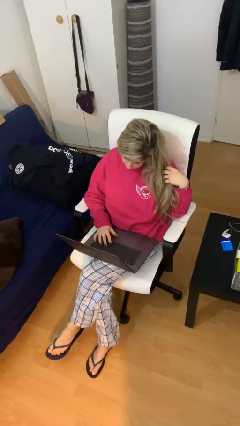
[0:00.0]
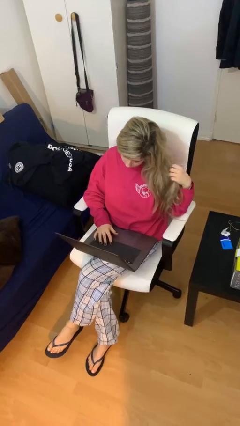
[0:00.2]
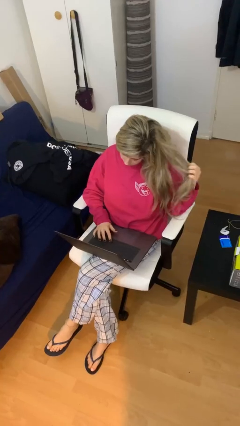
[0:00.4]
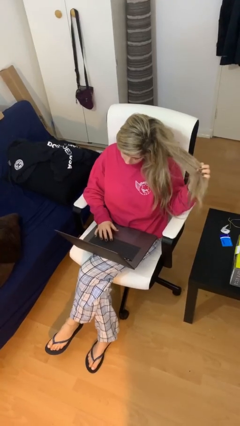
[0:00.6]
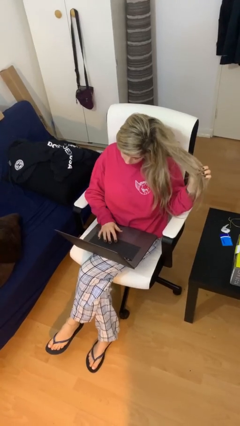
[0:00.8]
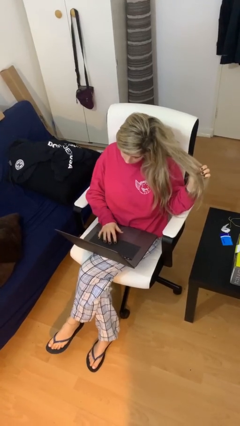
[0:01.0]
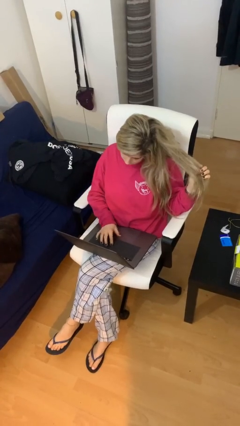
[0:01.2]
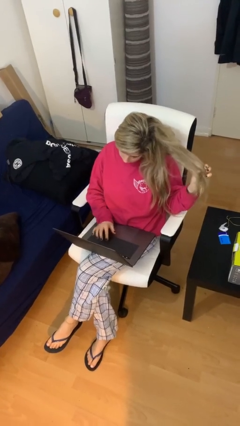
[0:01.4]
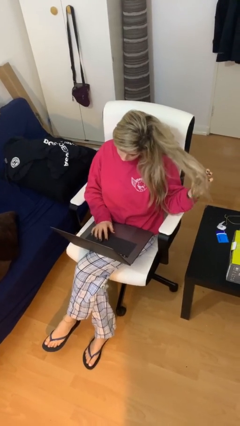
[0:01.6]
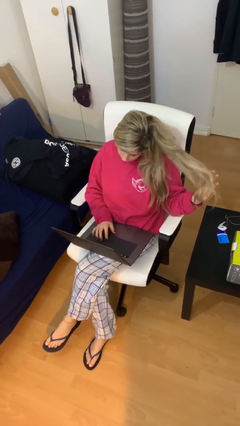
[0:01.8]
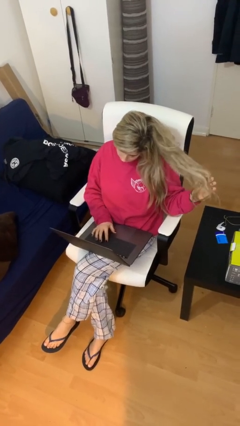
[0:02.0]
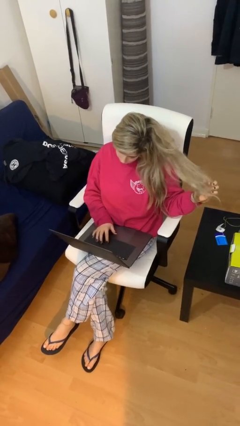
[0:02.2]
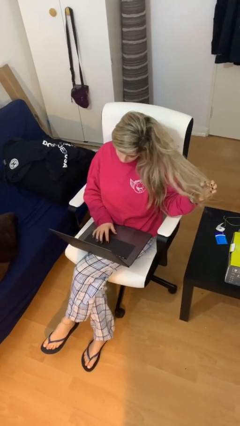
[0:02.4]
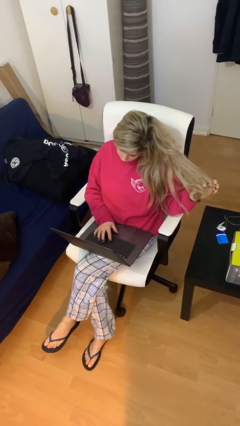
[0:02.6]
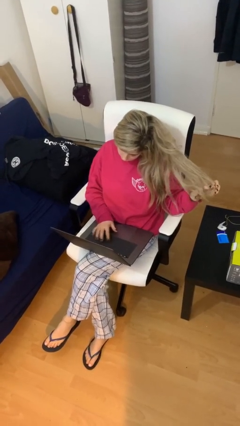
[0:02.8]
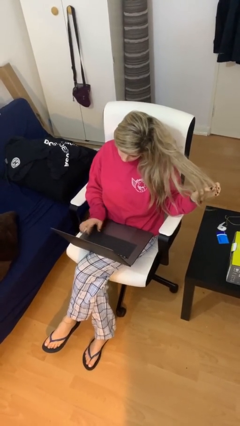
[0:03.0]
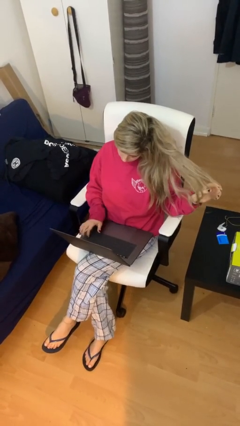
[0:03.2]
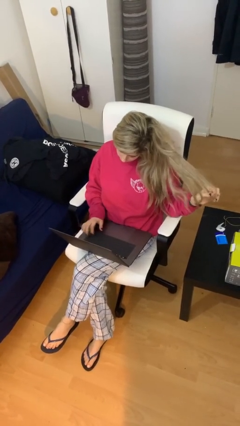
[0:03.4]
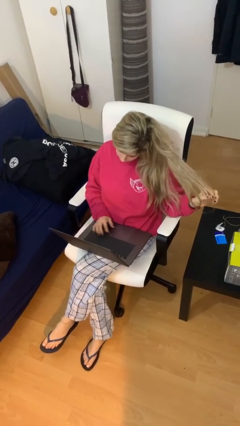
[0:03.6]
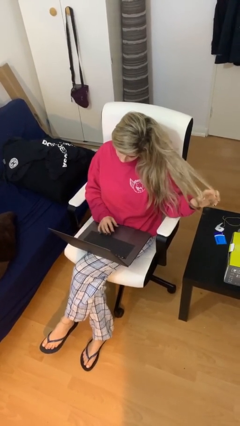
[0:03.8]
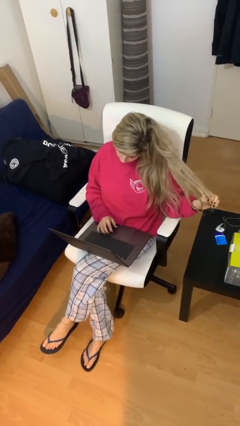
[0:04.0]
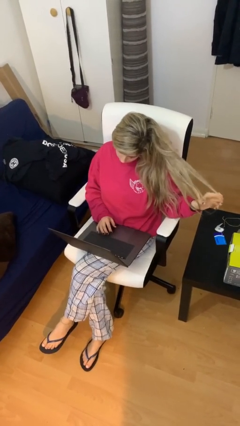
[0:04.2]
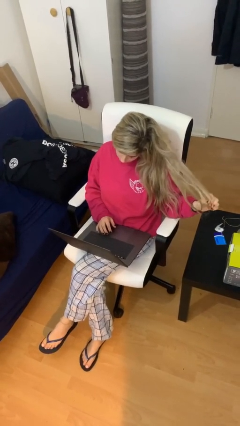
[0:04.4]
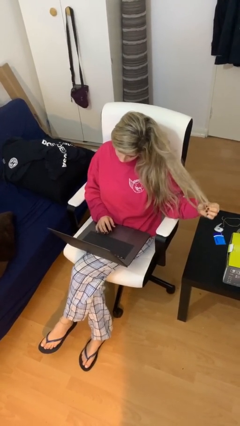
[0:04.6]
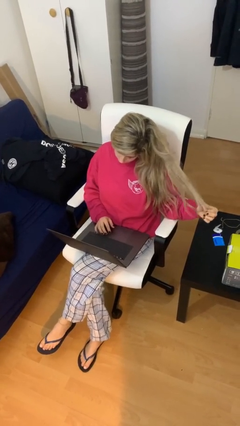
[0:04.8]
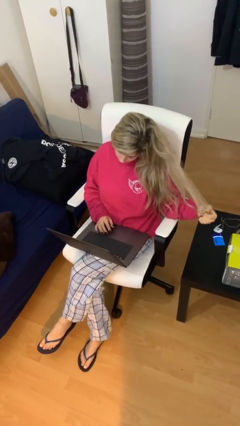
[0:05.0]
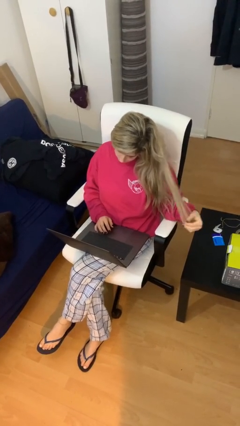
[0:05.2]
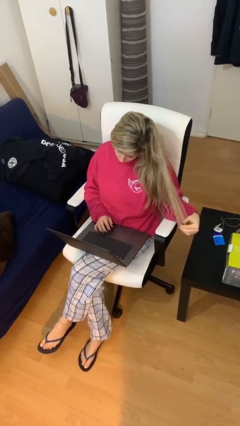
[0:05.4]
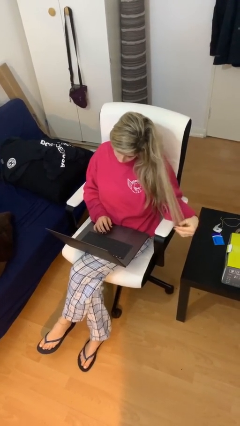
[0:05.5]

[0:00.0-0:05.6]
person interacts with laptop

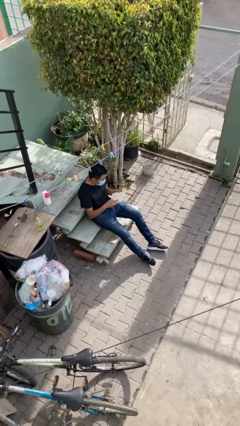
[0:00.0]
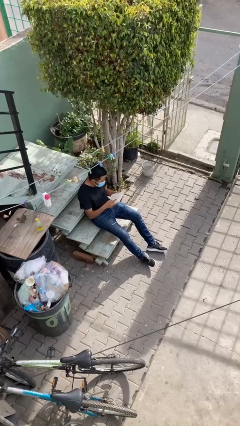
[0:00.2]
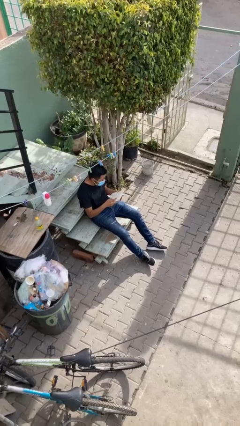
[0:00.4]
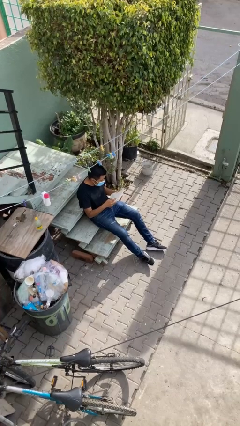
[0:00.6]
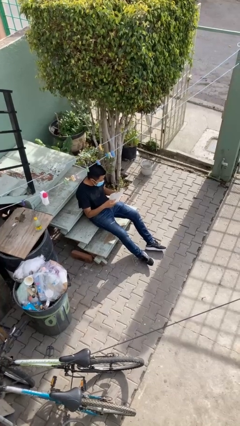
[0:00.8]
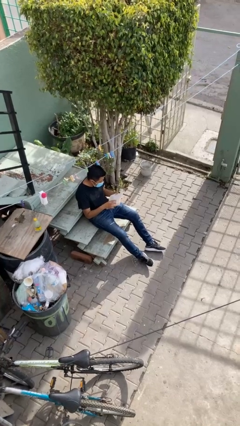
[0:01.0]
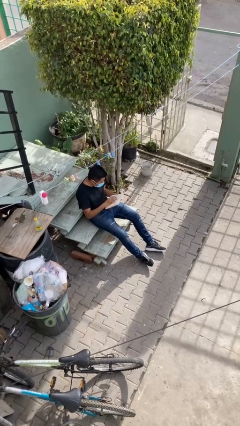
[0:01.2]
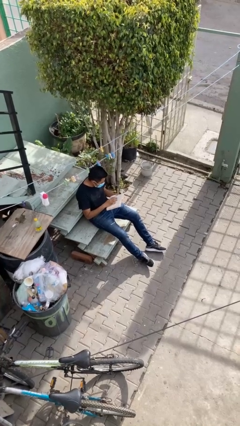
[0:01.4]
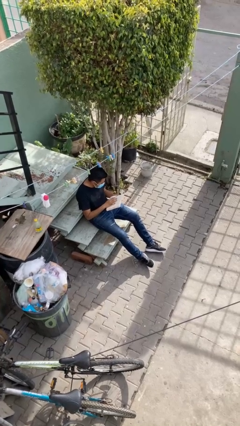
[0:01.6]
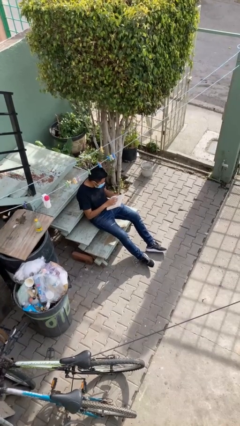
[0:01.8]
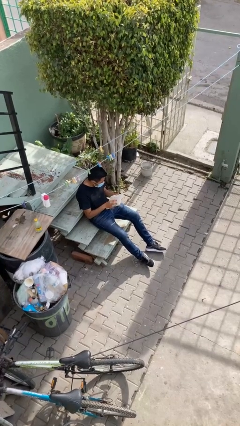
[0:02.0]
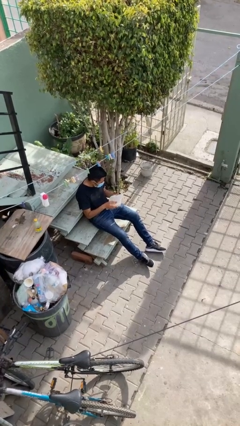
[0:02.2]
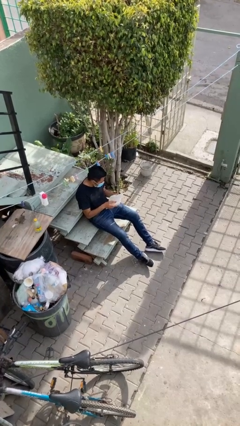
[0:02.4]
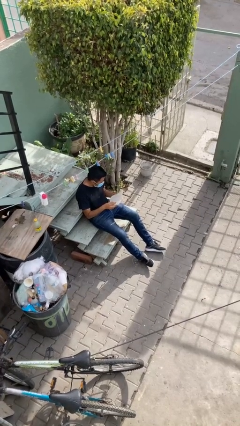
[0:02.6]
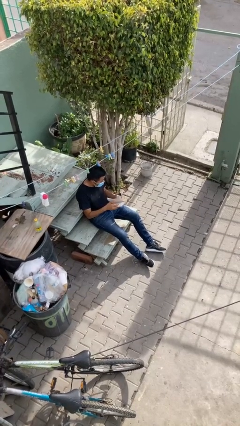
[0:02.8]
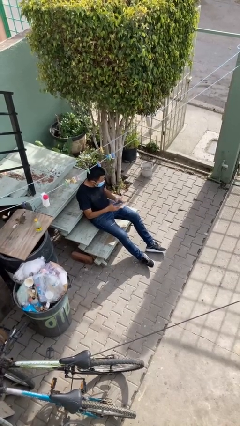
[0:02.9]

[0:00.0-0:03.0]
person reads document

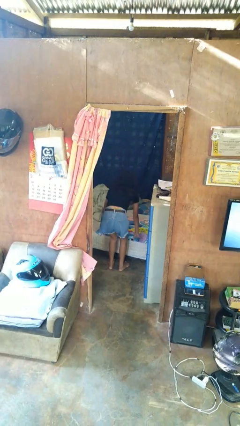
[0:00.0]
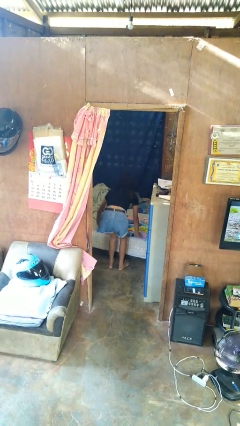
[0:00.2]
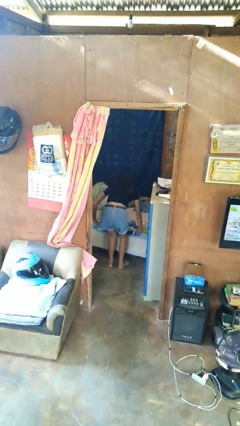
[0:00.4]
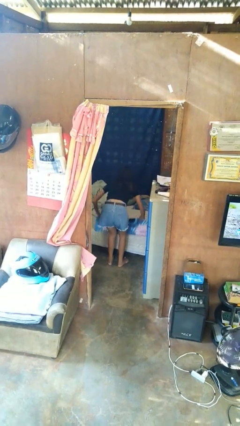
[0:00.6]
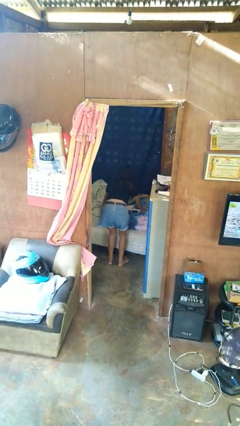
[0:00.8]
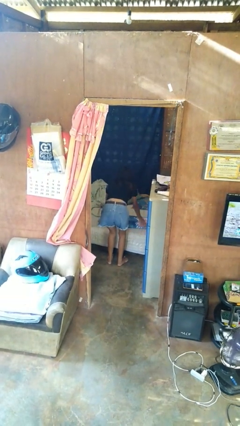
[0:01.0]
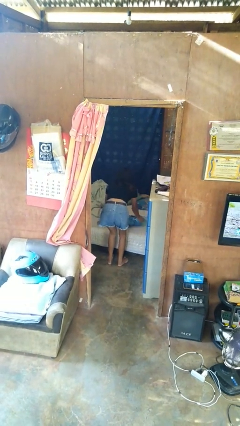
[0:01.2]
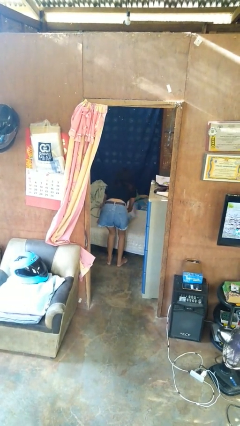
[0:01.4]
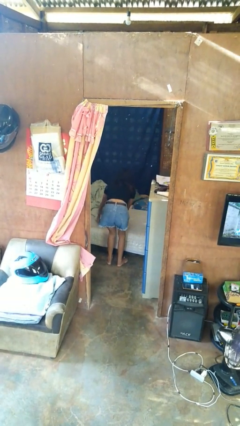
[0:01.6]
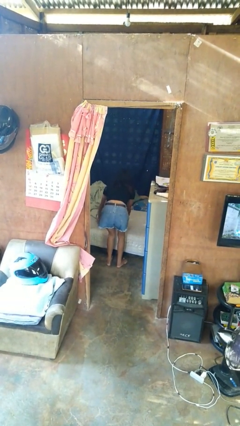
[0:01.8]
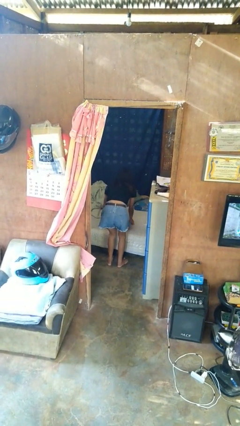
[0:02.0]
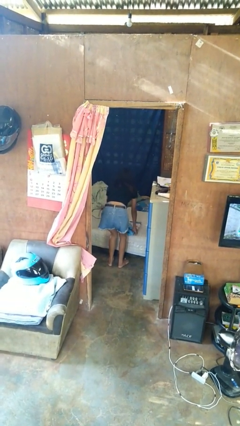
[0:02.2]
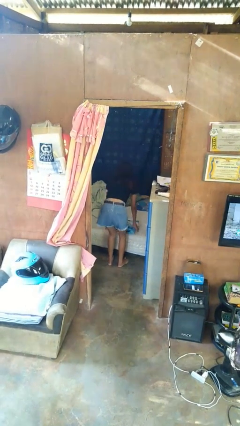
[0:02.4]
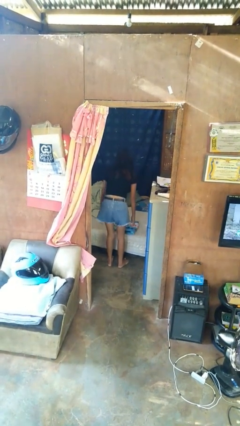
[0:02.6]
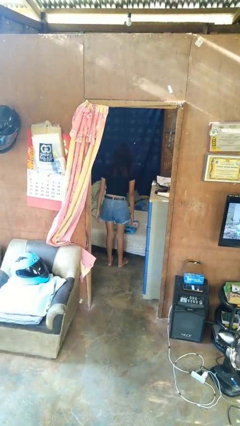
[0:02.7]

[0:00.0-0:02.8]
person folds blanket

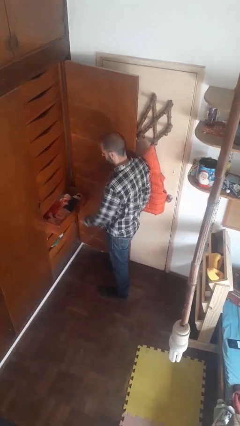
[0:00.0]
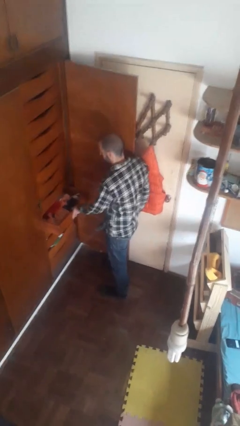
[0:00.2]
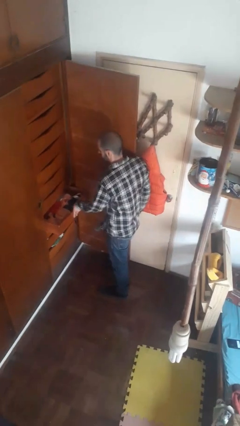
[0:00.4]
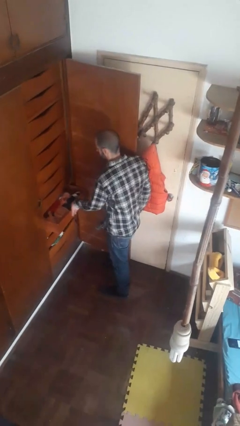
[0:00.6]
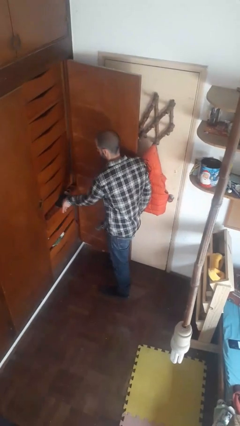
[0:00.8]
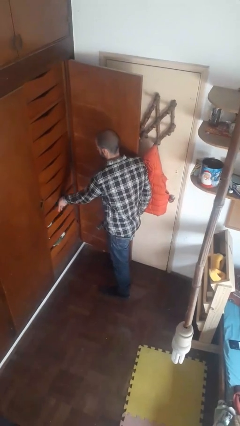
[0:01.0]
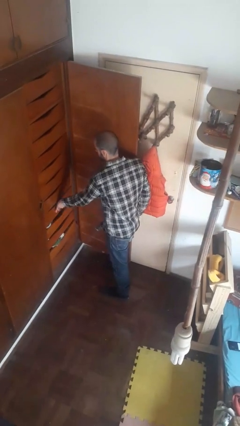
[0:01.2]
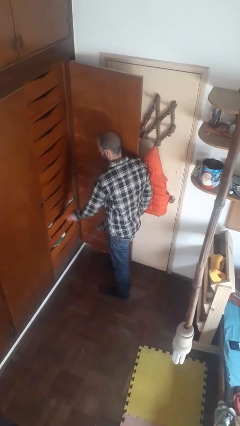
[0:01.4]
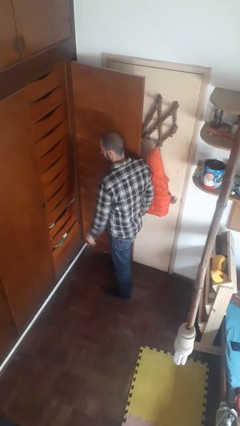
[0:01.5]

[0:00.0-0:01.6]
person closes dresser drawer

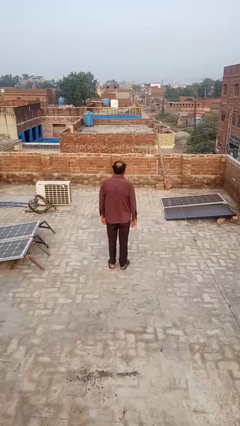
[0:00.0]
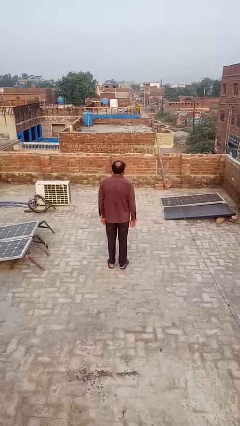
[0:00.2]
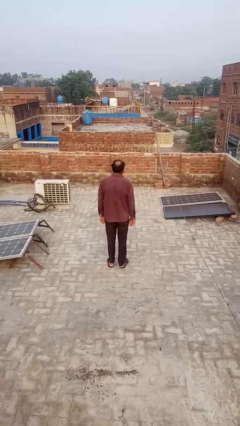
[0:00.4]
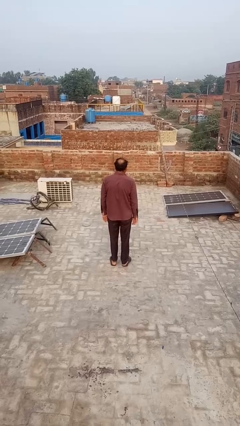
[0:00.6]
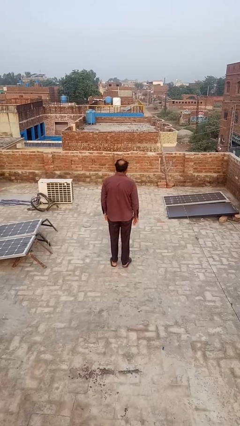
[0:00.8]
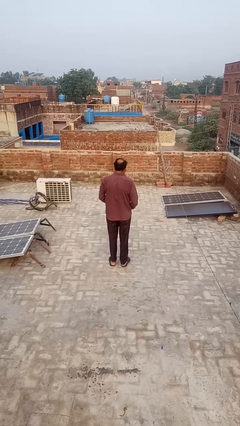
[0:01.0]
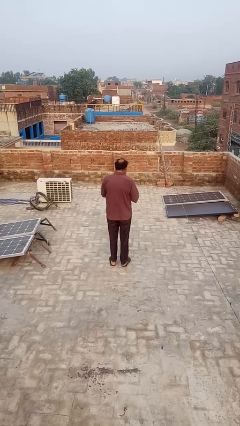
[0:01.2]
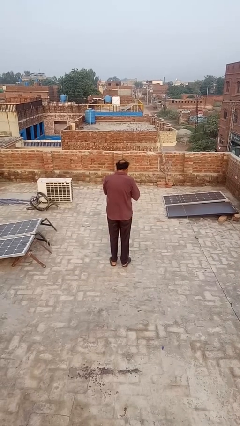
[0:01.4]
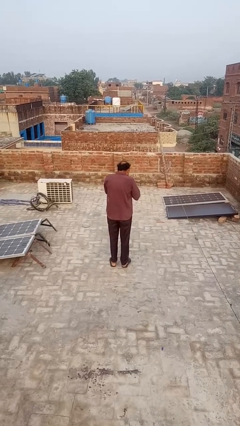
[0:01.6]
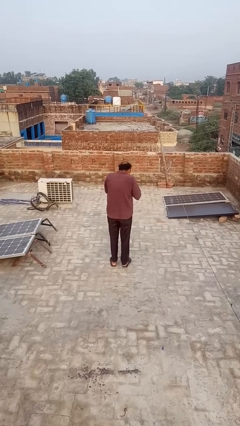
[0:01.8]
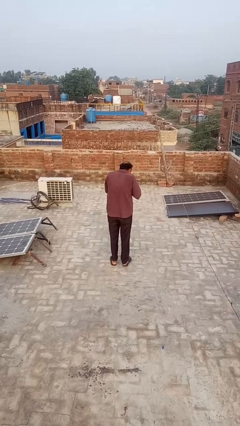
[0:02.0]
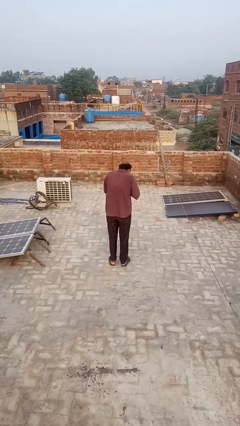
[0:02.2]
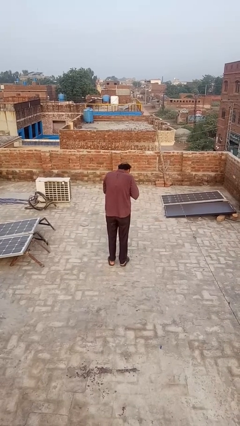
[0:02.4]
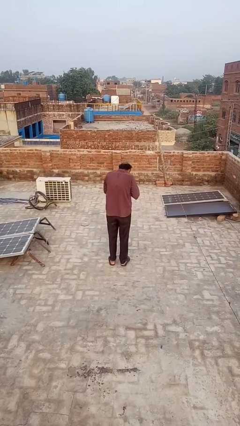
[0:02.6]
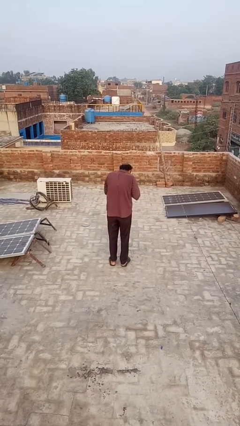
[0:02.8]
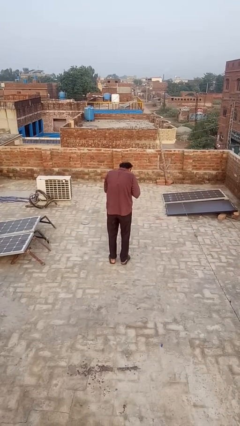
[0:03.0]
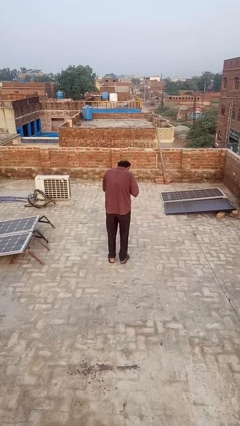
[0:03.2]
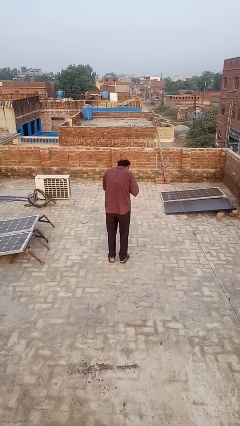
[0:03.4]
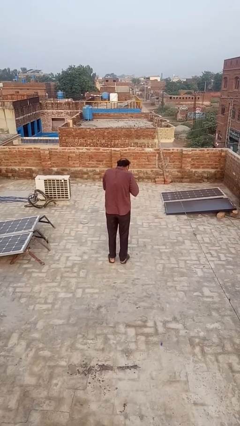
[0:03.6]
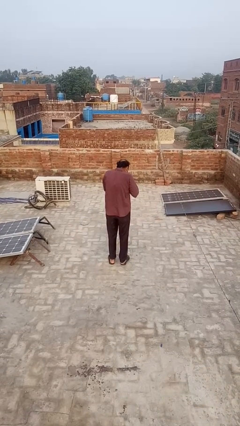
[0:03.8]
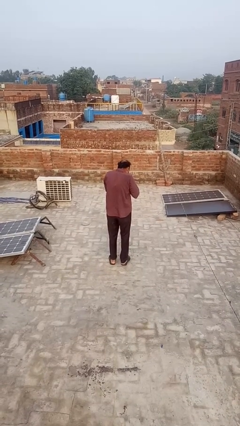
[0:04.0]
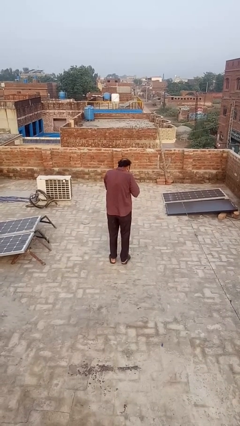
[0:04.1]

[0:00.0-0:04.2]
person blows into hands

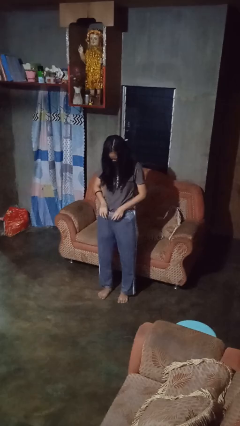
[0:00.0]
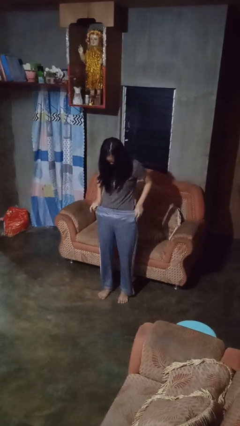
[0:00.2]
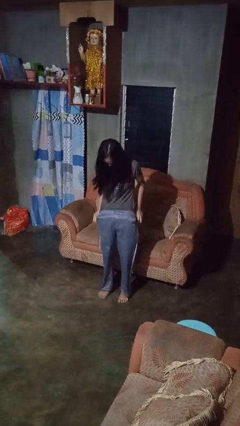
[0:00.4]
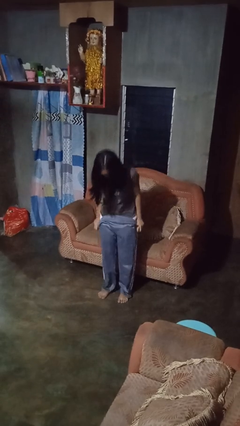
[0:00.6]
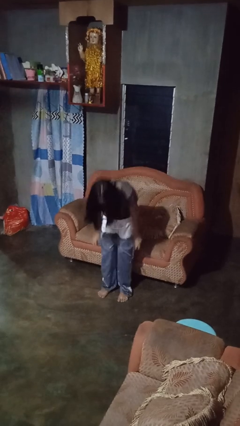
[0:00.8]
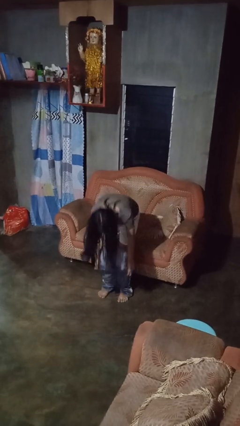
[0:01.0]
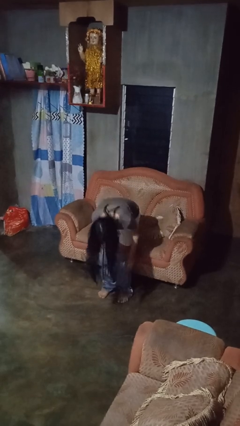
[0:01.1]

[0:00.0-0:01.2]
person takes off pants
